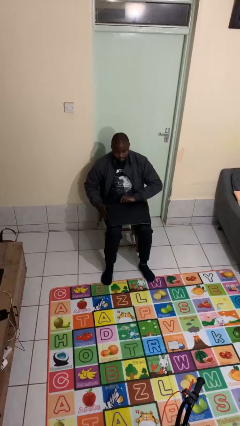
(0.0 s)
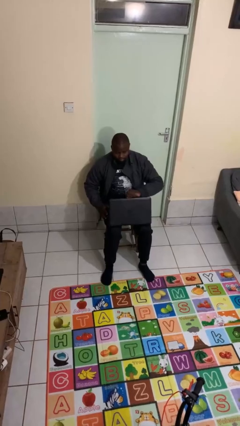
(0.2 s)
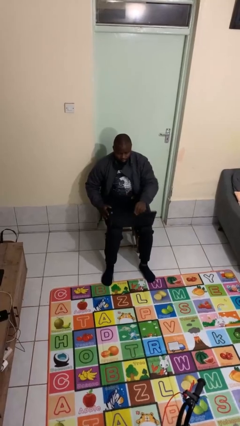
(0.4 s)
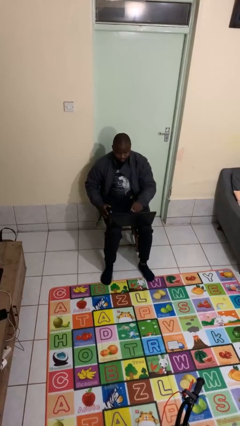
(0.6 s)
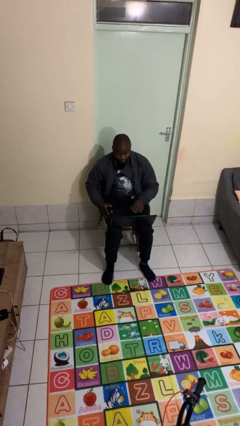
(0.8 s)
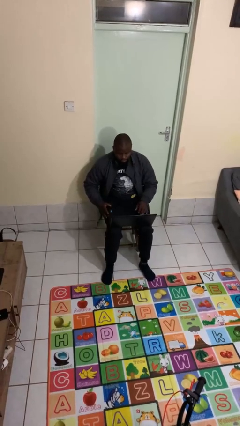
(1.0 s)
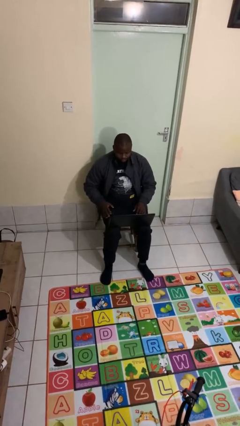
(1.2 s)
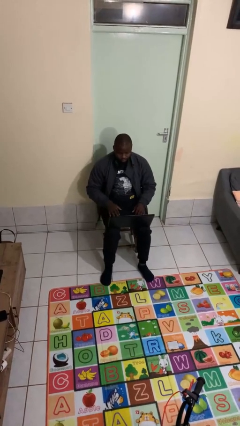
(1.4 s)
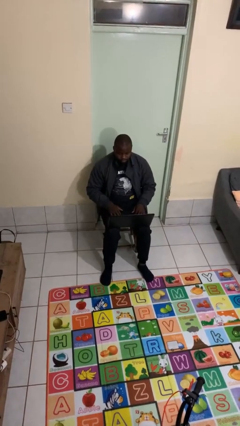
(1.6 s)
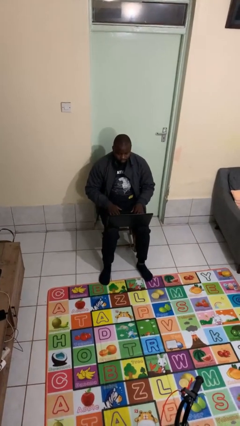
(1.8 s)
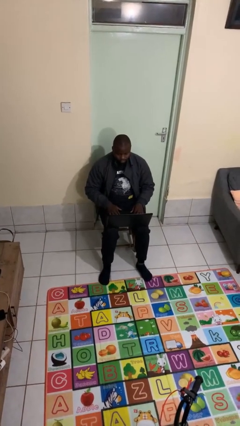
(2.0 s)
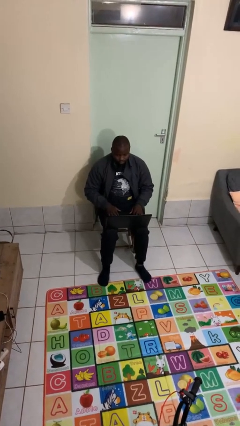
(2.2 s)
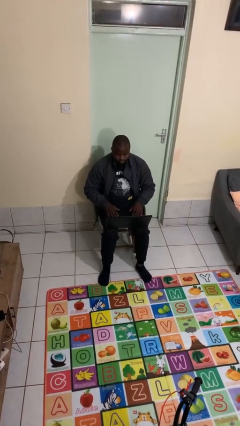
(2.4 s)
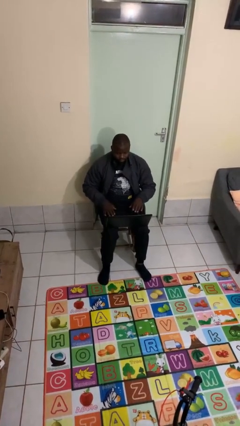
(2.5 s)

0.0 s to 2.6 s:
person opens laptop

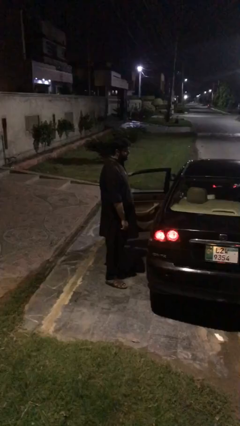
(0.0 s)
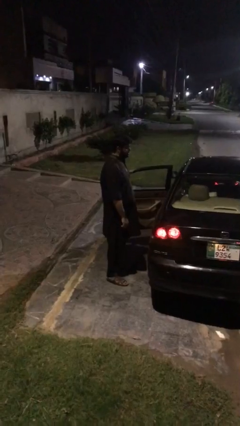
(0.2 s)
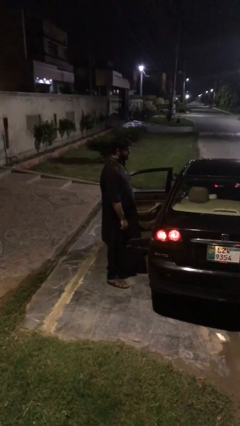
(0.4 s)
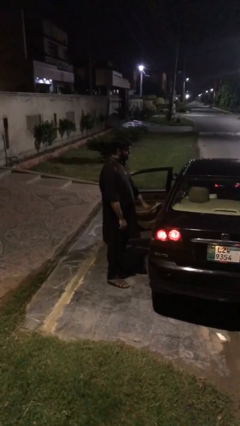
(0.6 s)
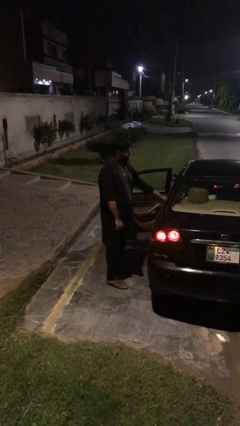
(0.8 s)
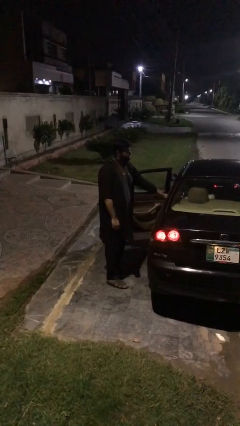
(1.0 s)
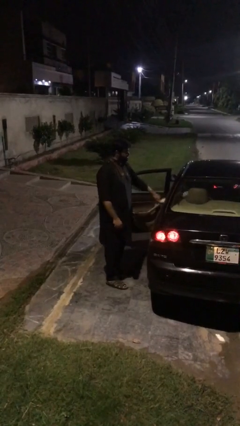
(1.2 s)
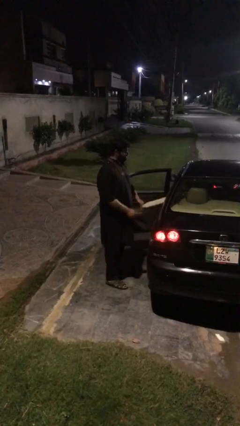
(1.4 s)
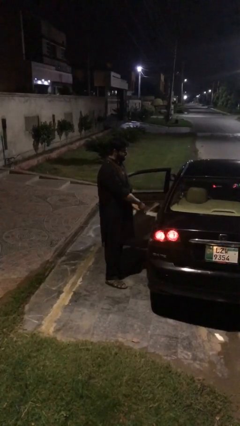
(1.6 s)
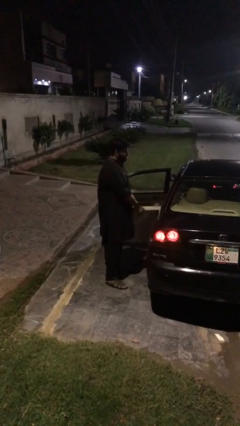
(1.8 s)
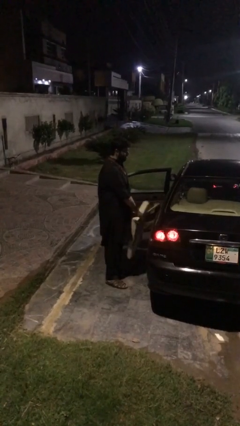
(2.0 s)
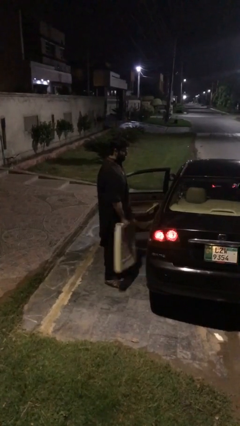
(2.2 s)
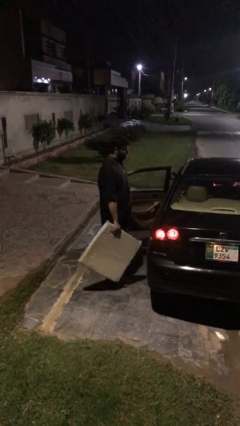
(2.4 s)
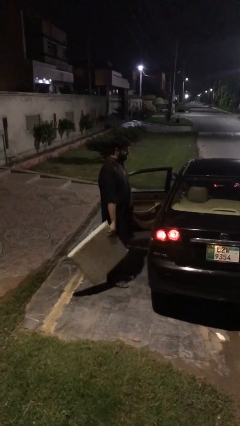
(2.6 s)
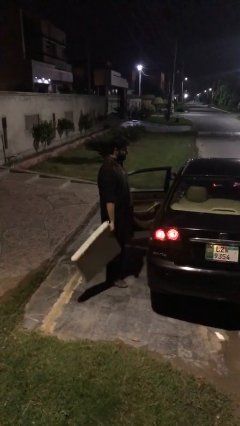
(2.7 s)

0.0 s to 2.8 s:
person unloads car

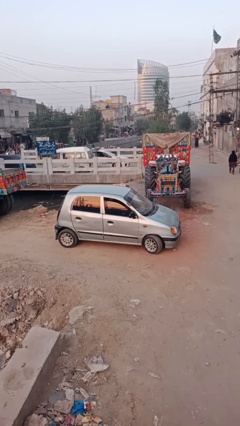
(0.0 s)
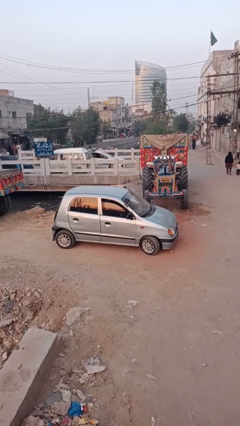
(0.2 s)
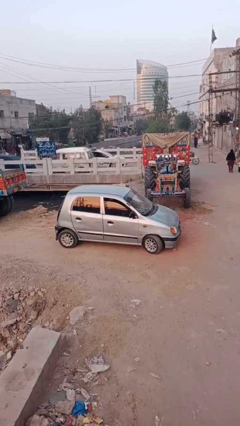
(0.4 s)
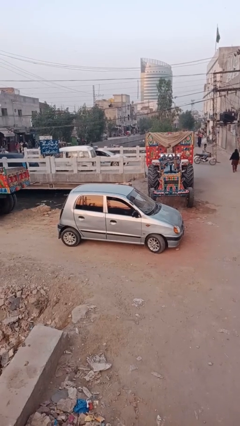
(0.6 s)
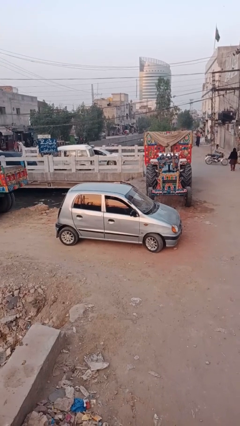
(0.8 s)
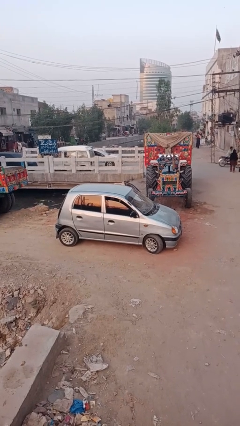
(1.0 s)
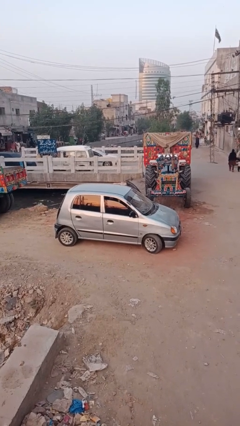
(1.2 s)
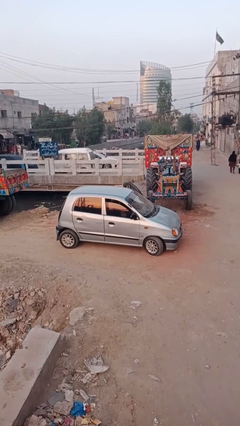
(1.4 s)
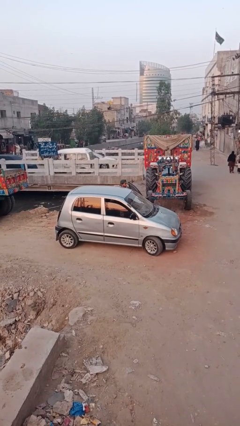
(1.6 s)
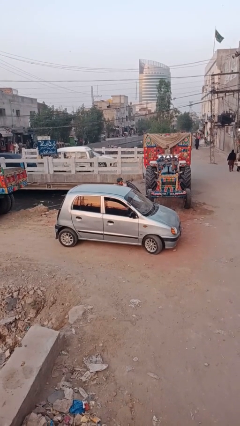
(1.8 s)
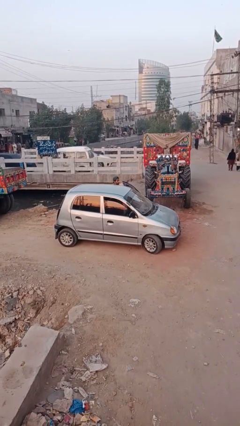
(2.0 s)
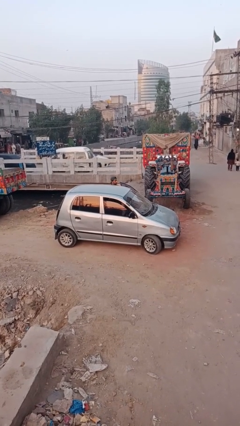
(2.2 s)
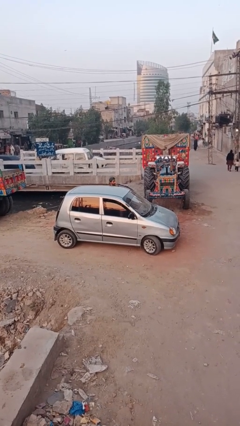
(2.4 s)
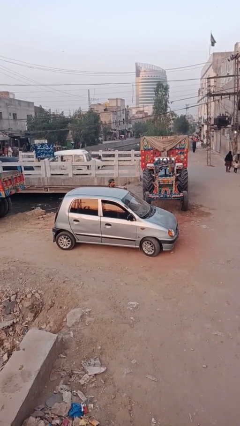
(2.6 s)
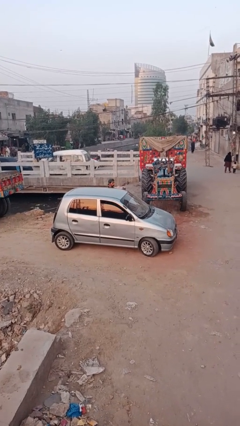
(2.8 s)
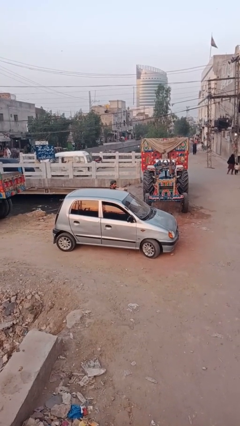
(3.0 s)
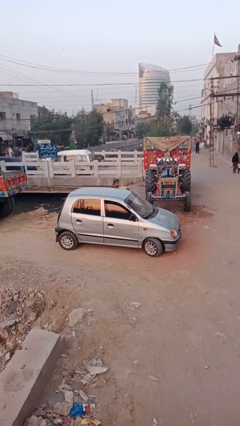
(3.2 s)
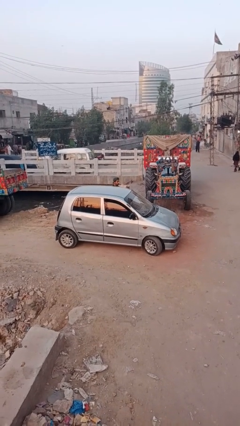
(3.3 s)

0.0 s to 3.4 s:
car drops off person

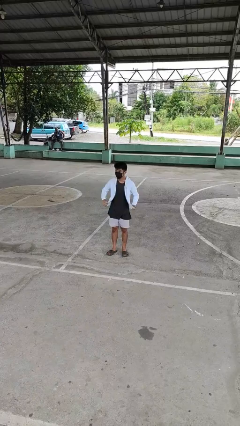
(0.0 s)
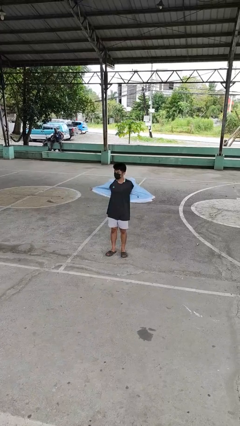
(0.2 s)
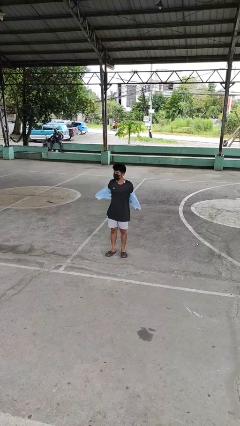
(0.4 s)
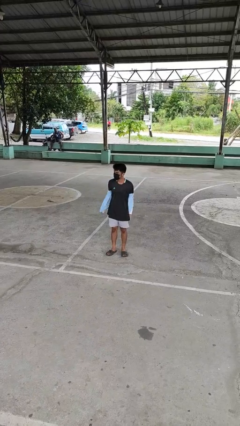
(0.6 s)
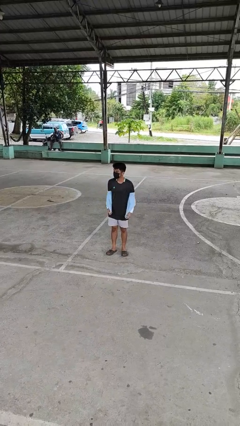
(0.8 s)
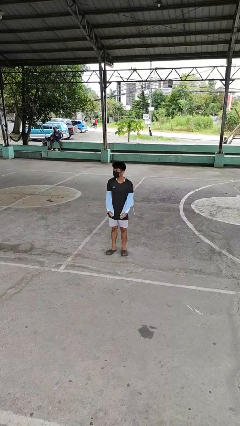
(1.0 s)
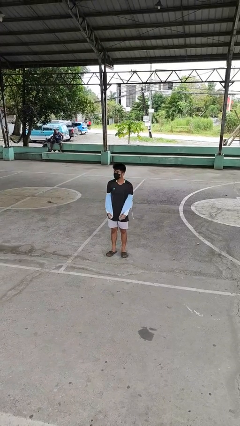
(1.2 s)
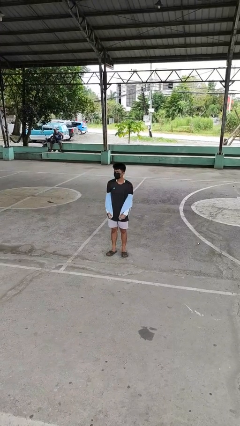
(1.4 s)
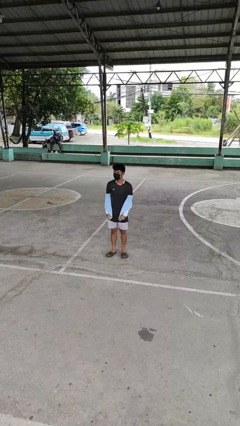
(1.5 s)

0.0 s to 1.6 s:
person takes off jacket

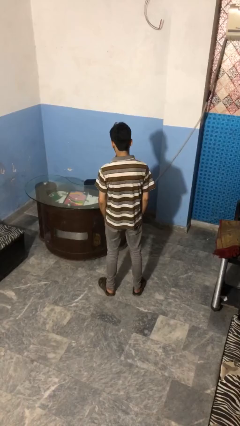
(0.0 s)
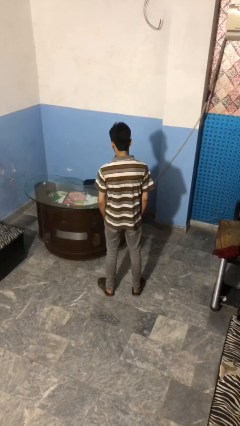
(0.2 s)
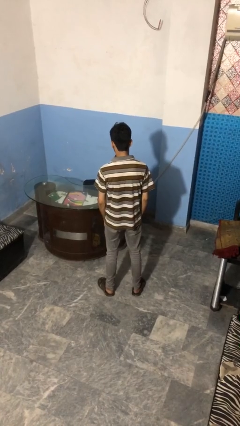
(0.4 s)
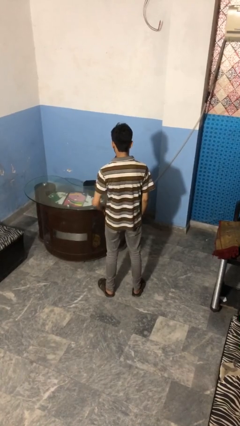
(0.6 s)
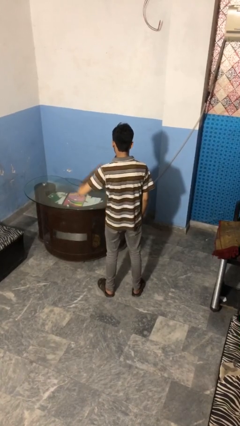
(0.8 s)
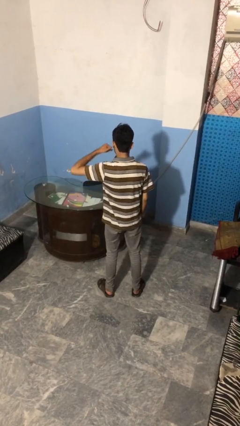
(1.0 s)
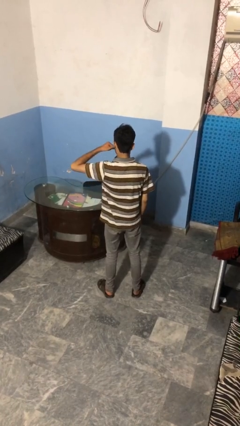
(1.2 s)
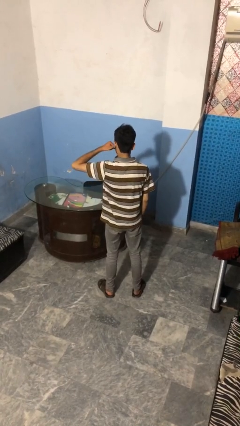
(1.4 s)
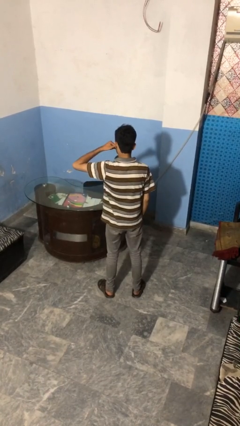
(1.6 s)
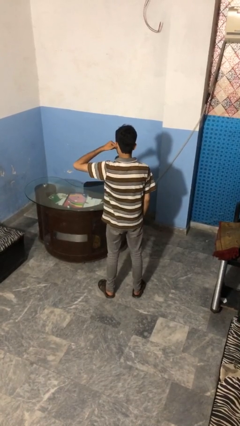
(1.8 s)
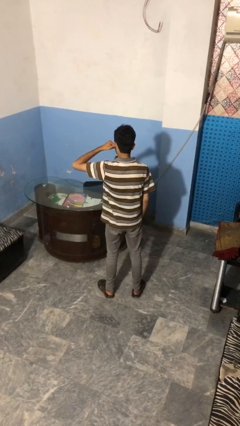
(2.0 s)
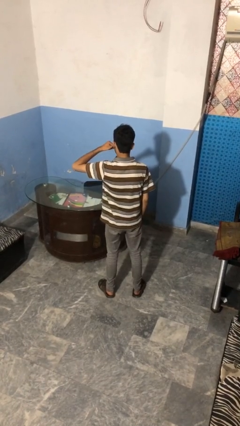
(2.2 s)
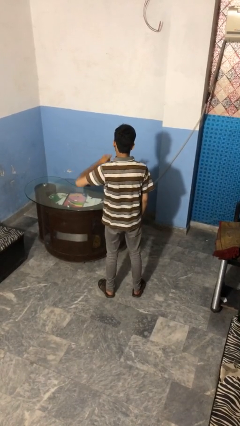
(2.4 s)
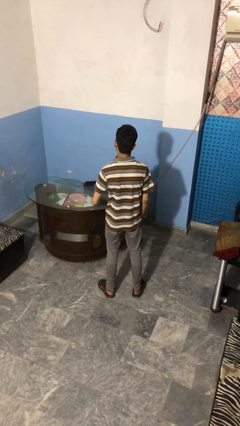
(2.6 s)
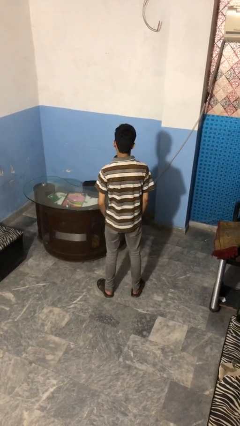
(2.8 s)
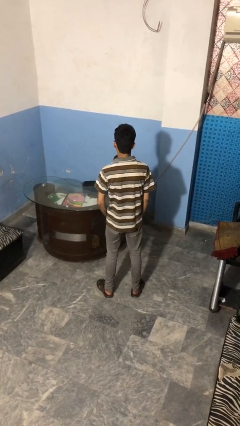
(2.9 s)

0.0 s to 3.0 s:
person gestures call me

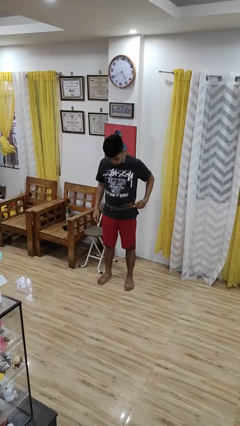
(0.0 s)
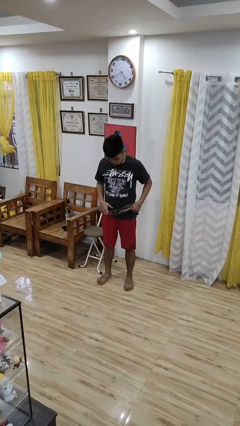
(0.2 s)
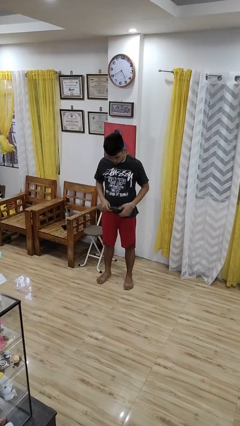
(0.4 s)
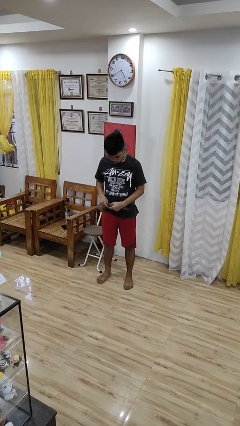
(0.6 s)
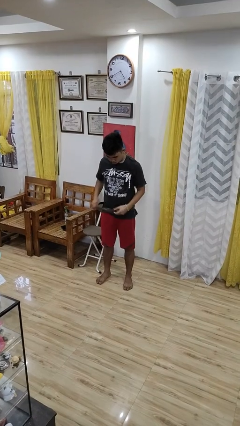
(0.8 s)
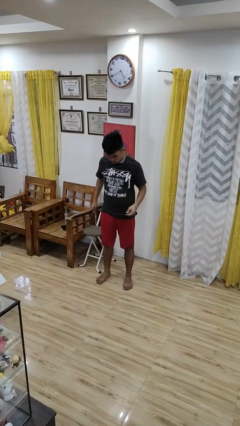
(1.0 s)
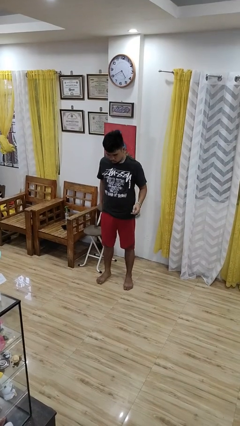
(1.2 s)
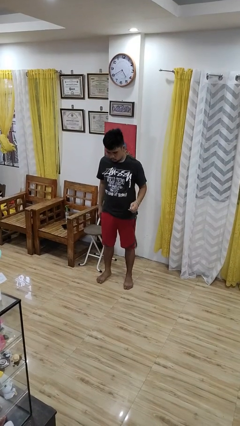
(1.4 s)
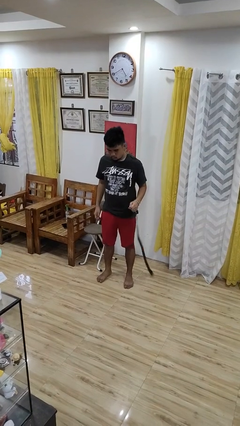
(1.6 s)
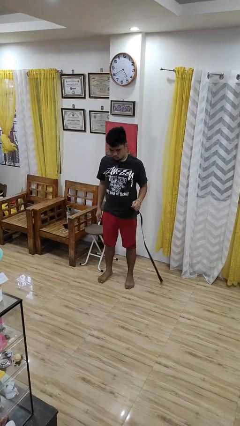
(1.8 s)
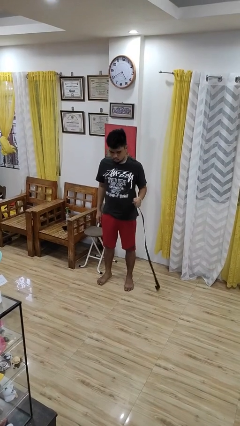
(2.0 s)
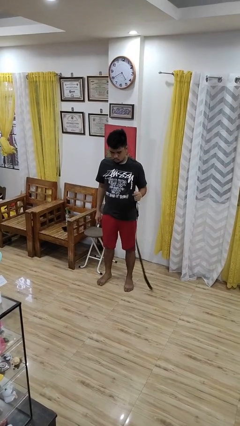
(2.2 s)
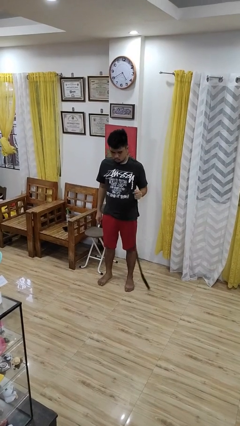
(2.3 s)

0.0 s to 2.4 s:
person takes off belt

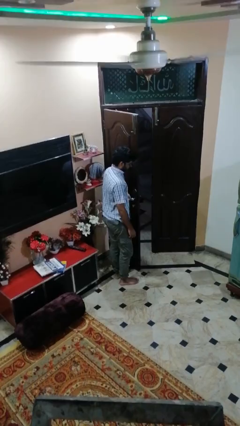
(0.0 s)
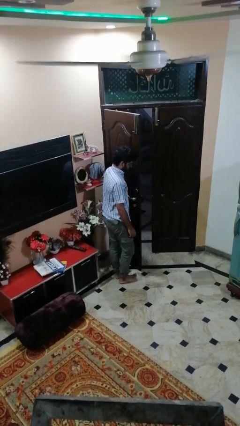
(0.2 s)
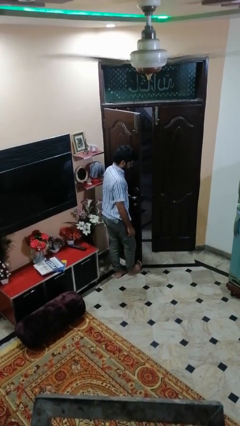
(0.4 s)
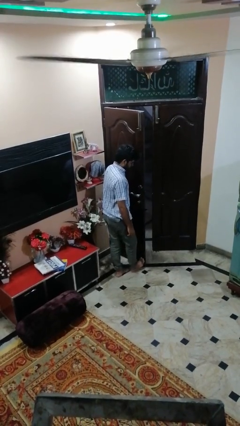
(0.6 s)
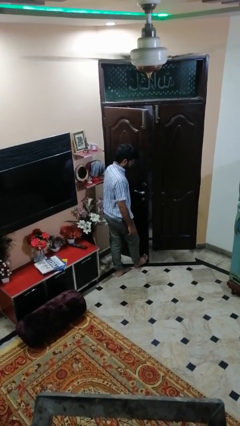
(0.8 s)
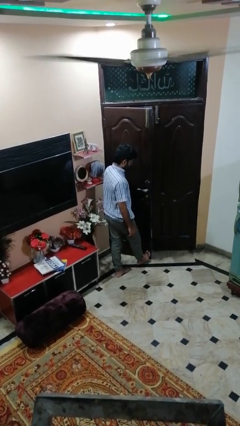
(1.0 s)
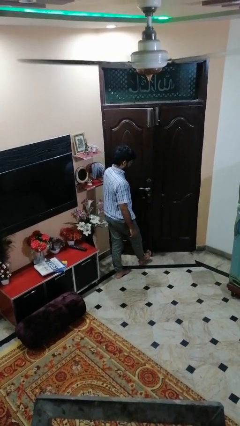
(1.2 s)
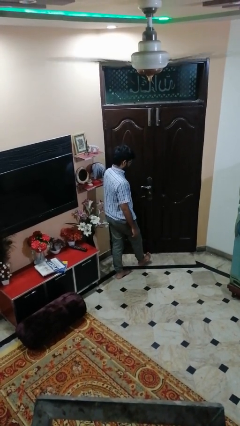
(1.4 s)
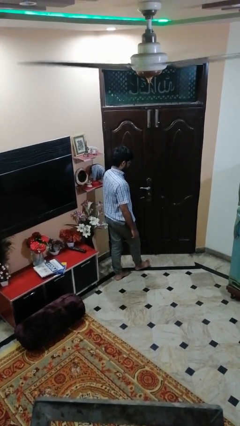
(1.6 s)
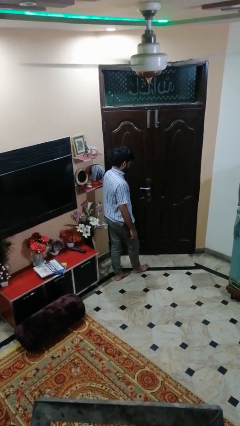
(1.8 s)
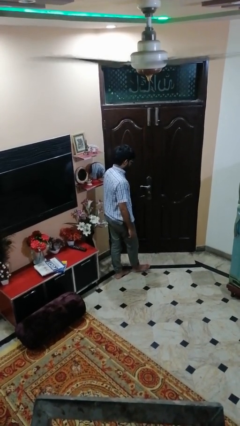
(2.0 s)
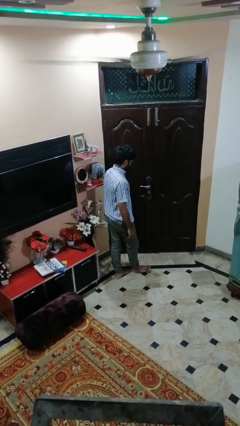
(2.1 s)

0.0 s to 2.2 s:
person closes door with foot
